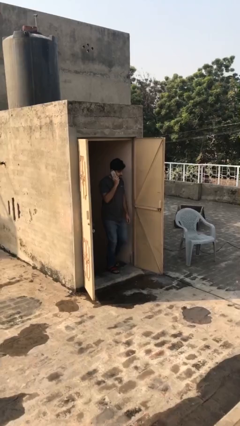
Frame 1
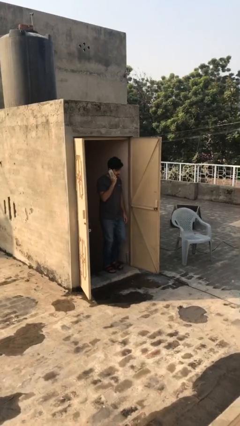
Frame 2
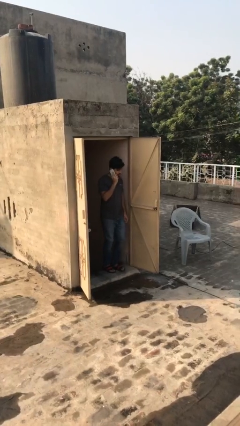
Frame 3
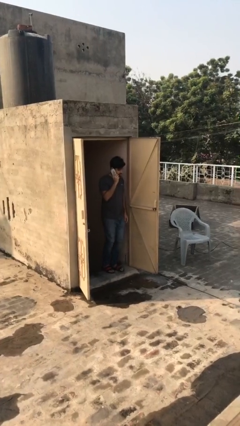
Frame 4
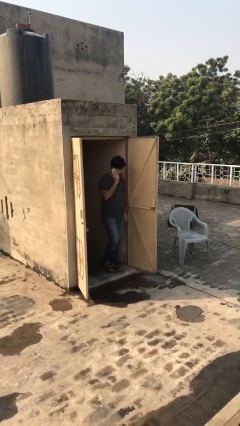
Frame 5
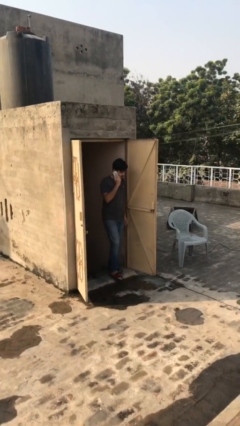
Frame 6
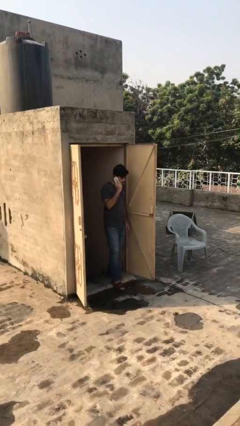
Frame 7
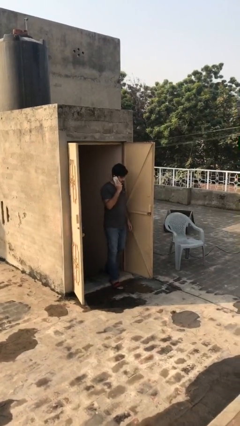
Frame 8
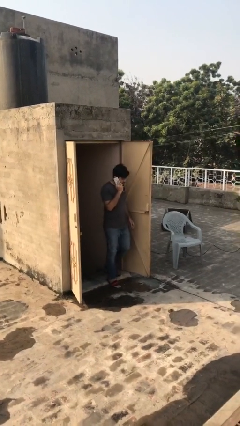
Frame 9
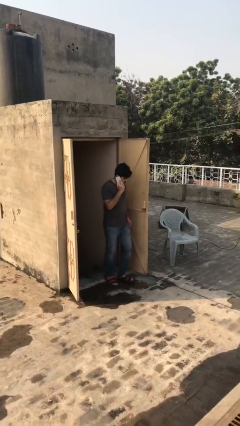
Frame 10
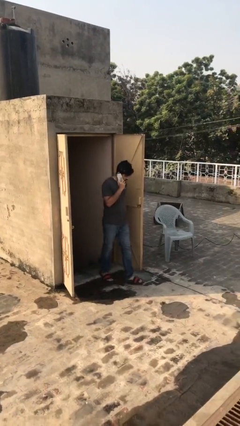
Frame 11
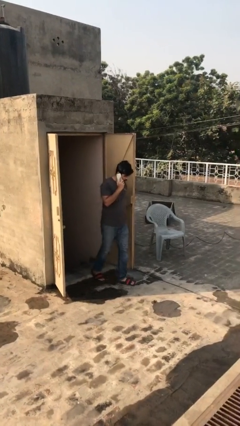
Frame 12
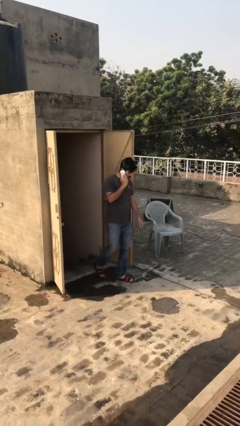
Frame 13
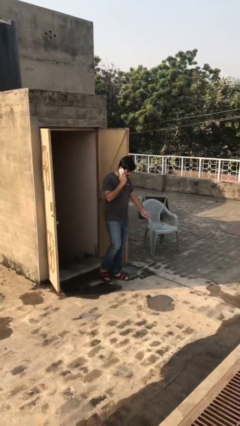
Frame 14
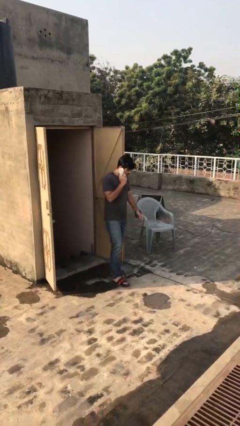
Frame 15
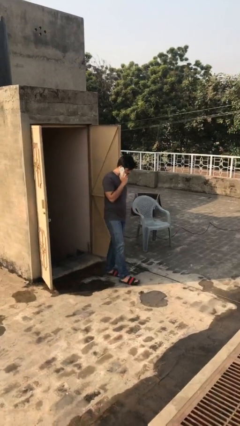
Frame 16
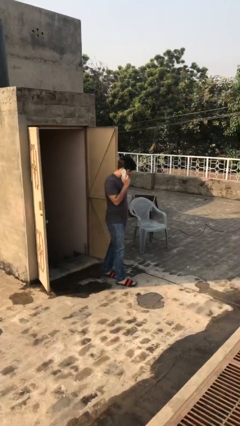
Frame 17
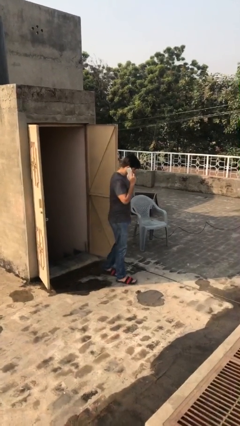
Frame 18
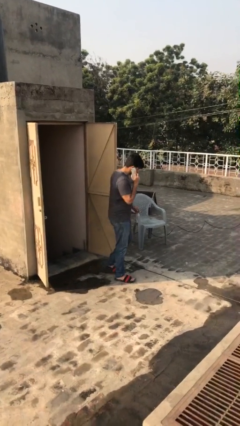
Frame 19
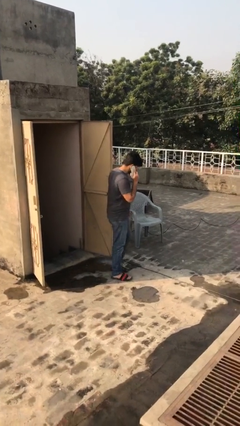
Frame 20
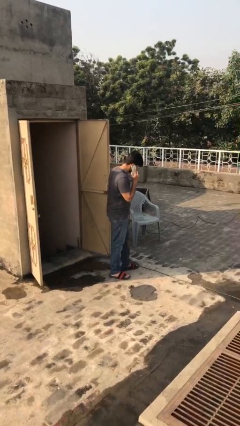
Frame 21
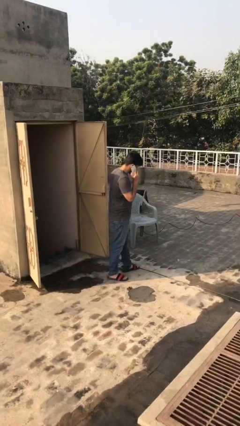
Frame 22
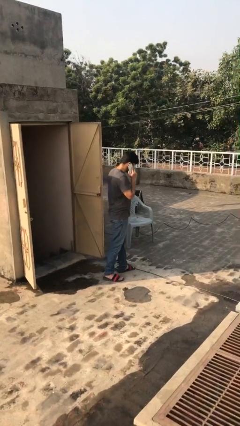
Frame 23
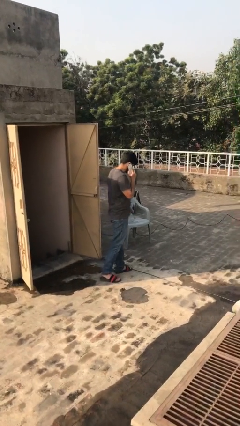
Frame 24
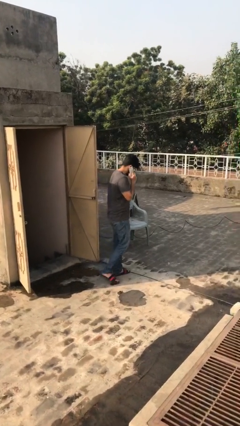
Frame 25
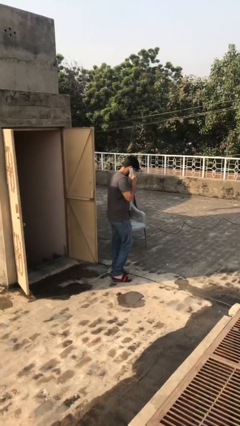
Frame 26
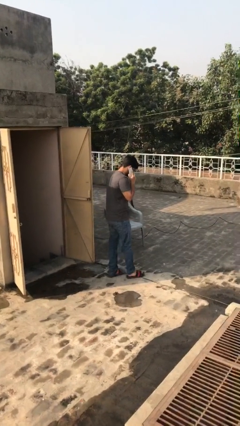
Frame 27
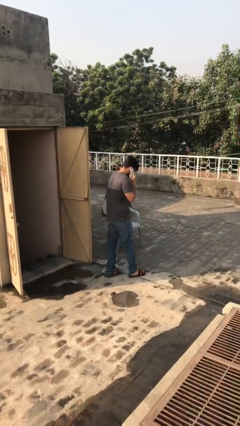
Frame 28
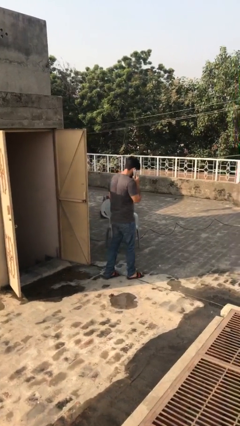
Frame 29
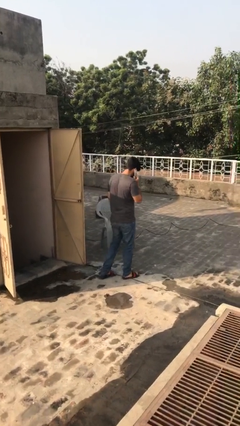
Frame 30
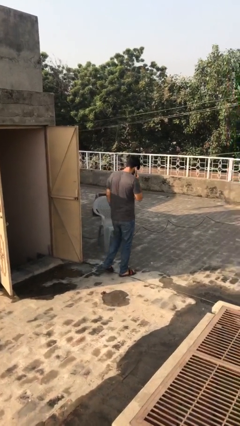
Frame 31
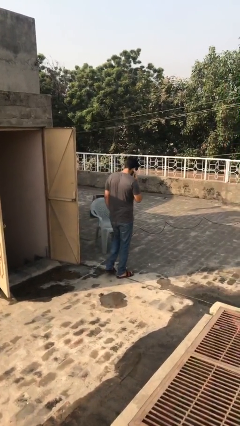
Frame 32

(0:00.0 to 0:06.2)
person enters scene through structure

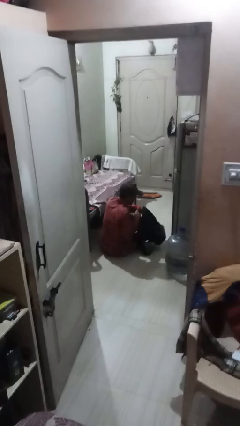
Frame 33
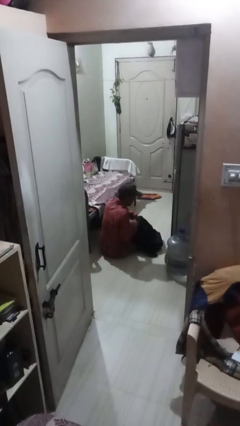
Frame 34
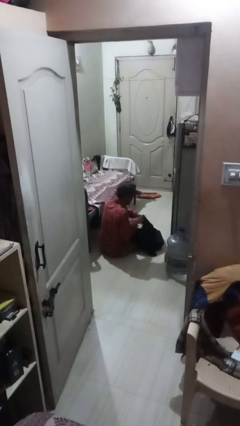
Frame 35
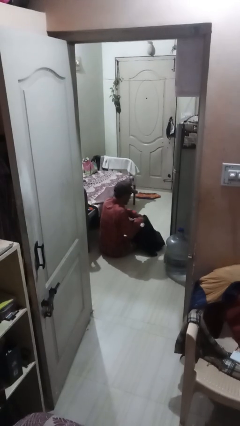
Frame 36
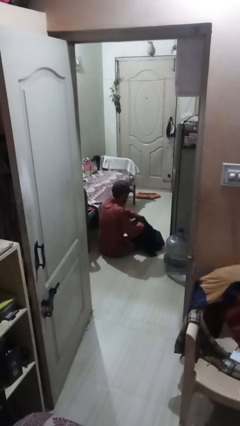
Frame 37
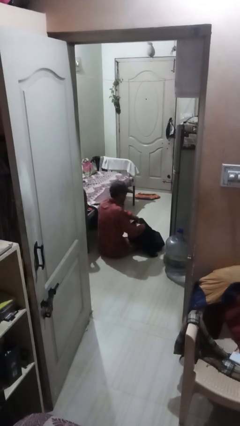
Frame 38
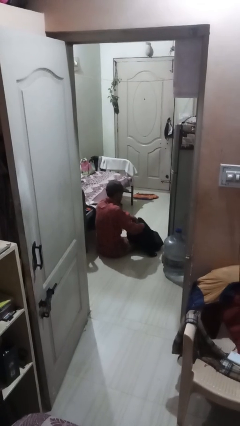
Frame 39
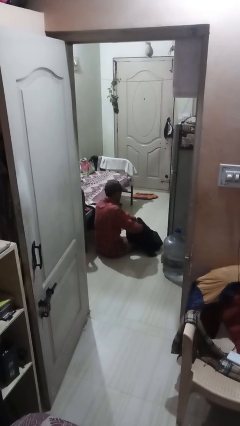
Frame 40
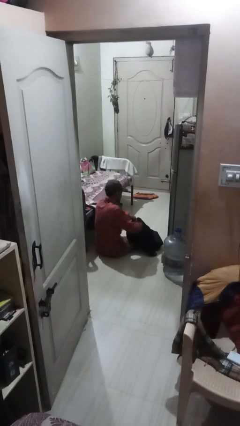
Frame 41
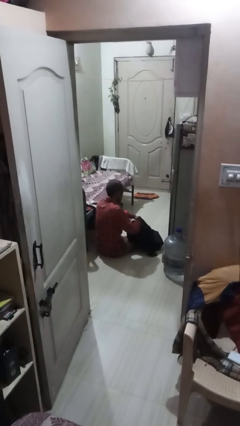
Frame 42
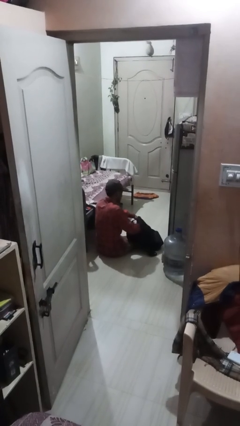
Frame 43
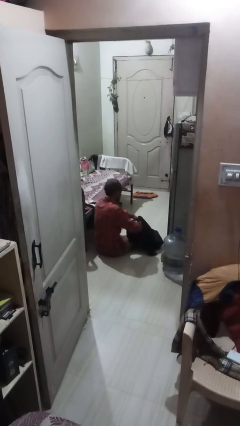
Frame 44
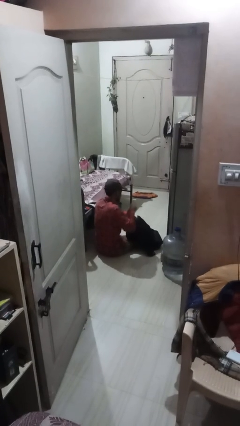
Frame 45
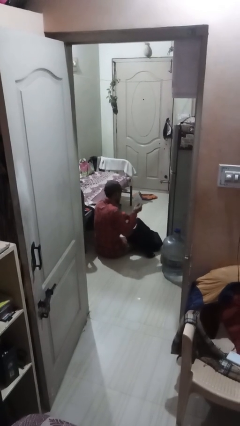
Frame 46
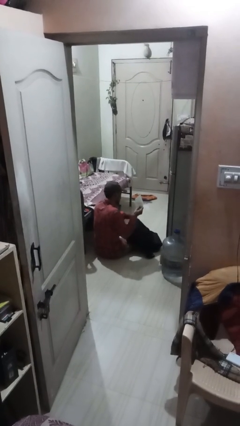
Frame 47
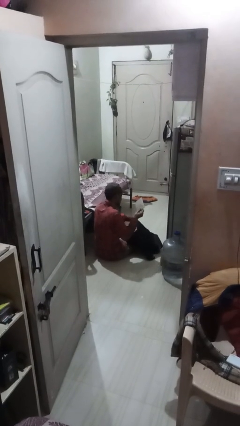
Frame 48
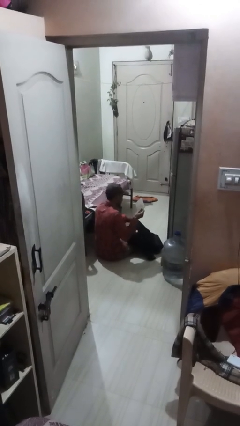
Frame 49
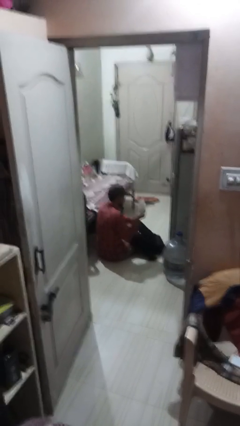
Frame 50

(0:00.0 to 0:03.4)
person takes object from backpack

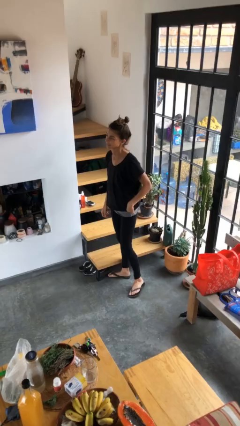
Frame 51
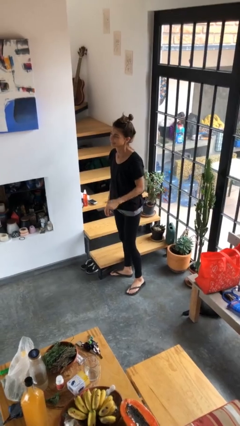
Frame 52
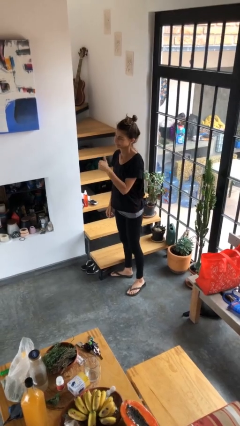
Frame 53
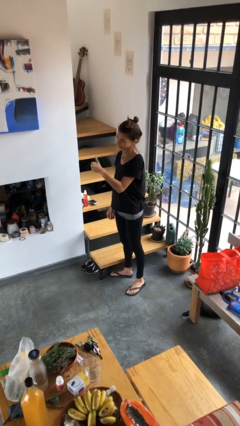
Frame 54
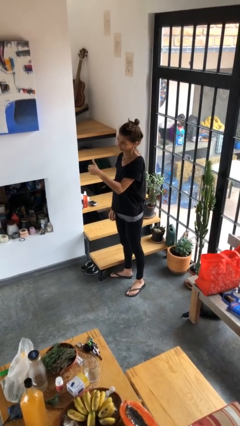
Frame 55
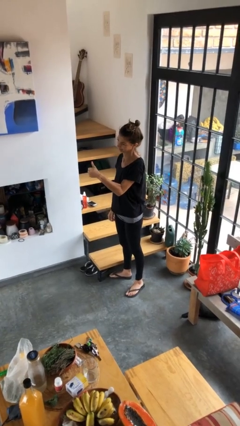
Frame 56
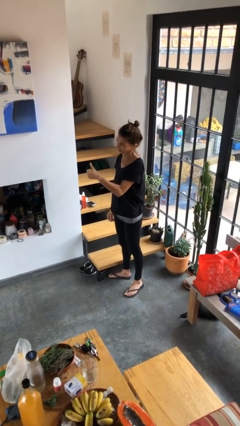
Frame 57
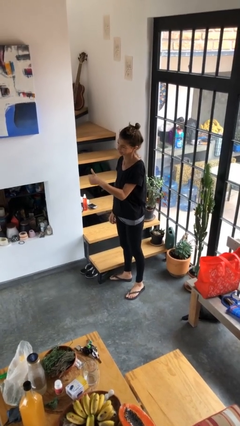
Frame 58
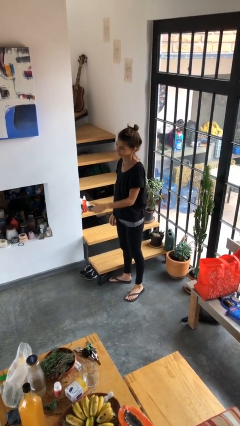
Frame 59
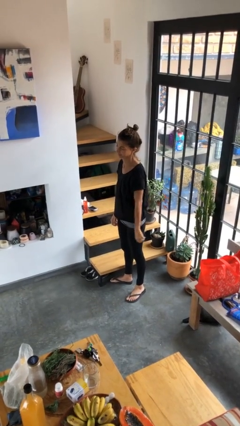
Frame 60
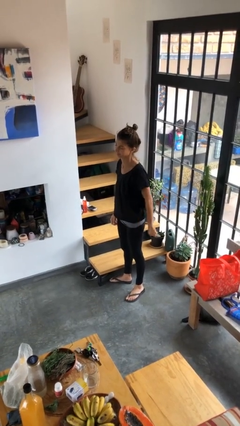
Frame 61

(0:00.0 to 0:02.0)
person gestures thumbs up

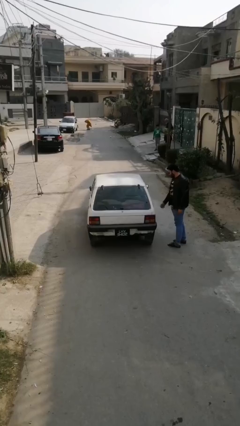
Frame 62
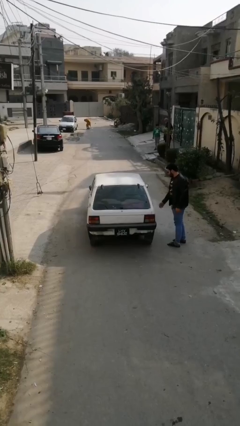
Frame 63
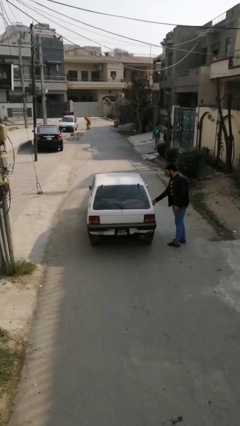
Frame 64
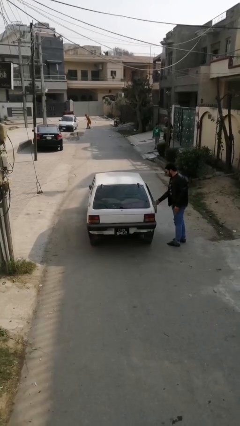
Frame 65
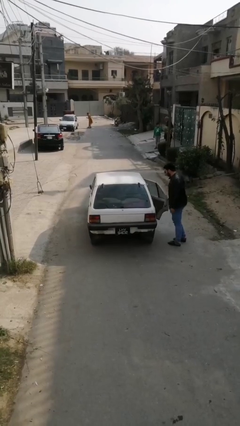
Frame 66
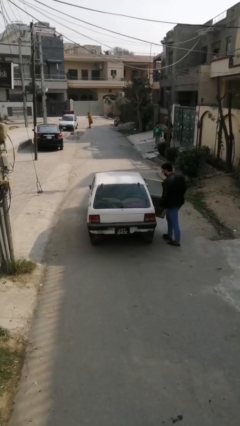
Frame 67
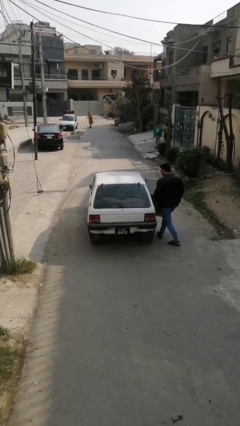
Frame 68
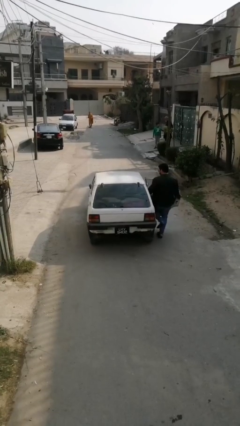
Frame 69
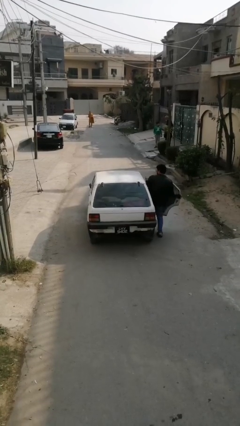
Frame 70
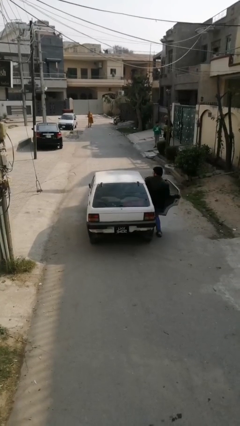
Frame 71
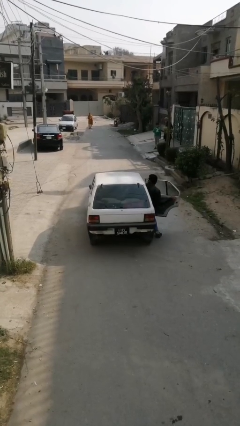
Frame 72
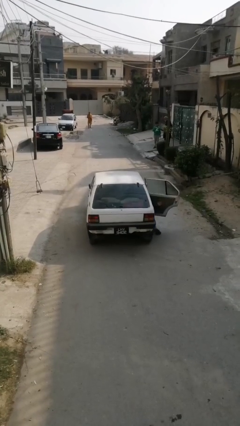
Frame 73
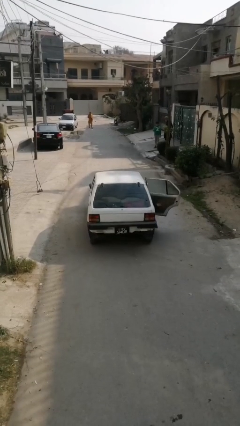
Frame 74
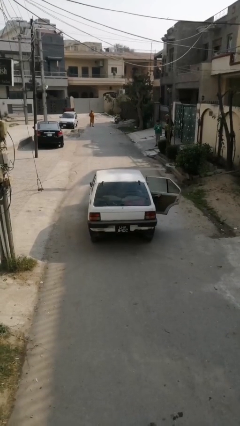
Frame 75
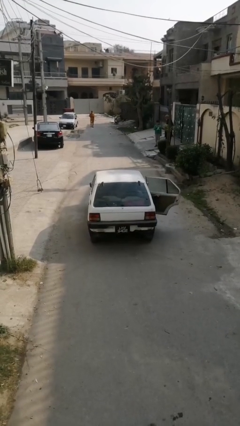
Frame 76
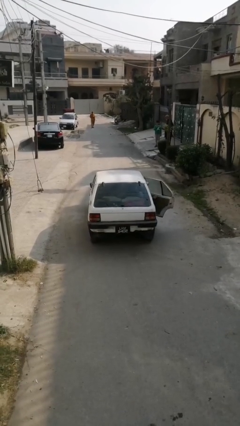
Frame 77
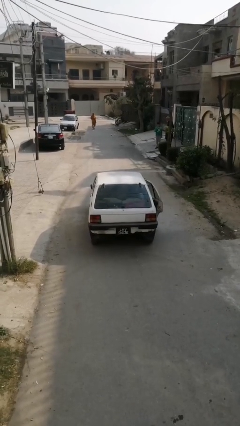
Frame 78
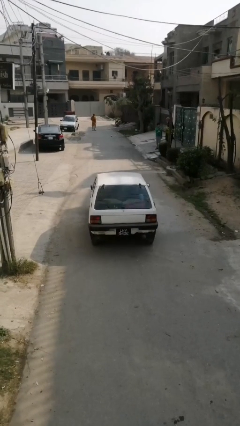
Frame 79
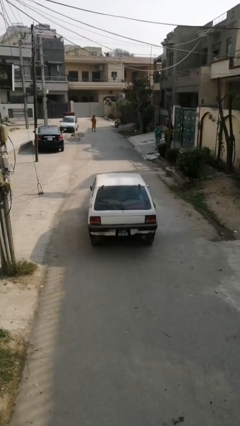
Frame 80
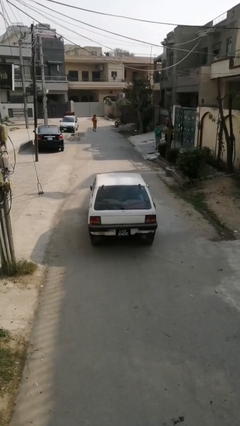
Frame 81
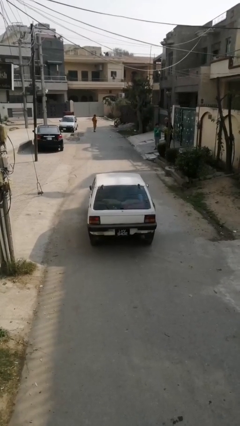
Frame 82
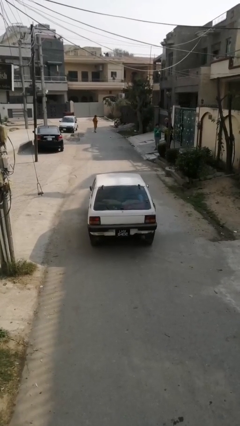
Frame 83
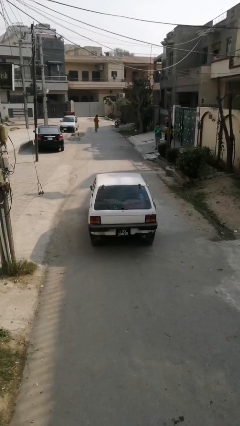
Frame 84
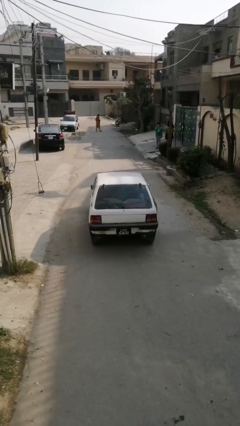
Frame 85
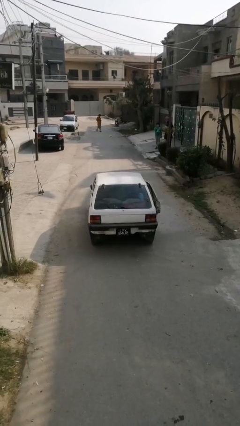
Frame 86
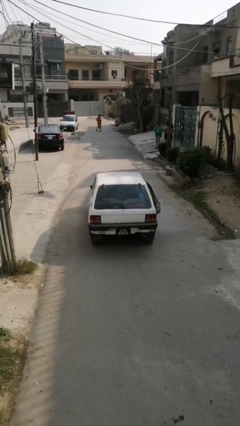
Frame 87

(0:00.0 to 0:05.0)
car picks up person

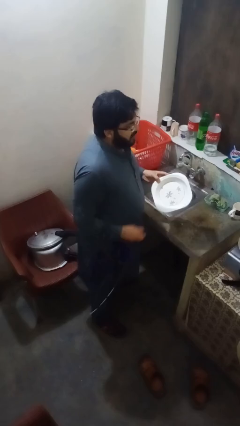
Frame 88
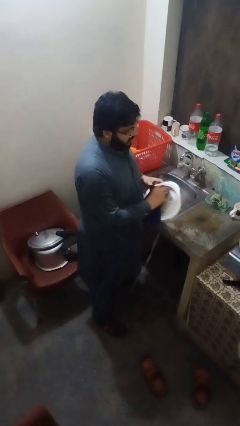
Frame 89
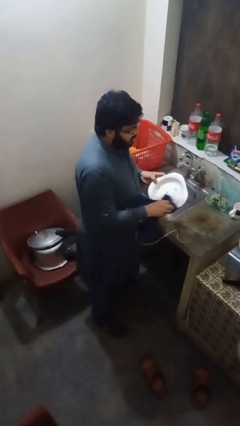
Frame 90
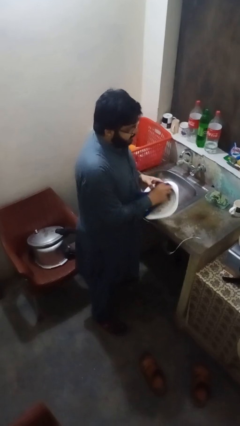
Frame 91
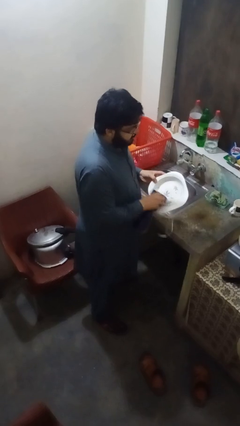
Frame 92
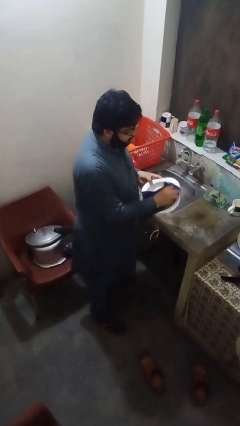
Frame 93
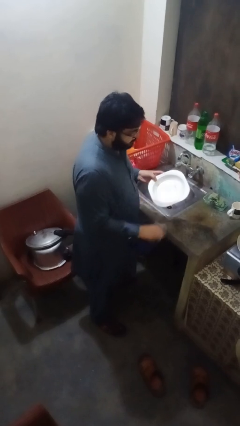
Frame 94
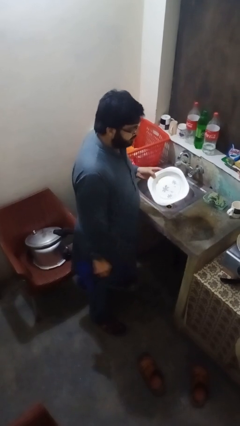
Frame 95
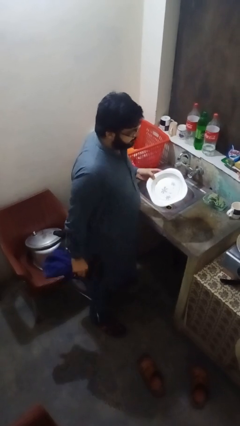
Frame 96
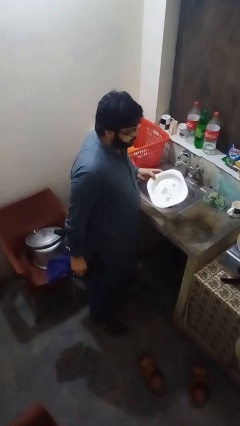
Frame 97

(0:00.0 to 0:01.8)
person dries dish
